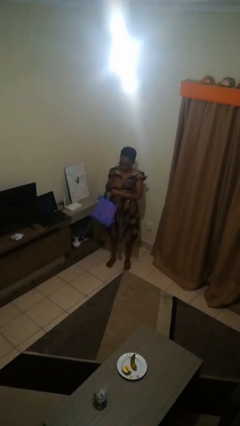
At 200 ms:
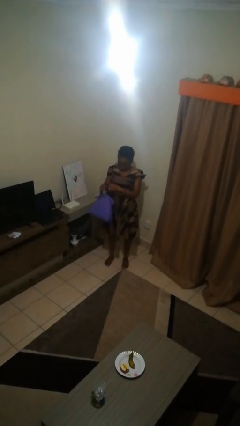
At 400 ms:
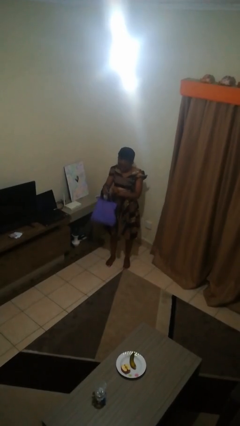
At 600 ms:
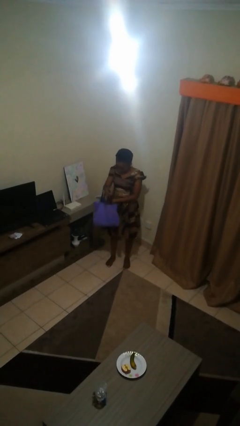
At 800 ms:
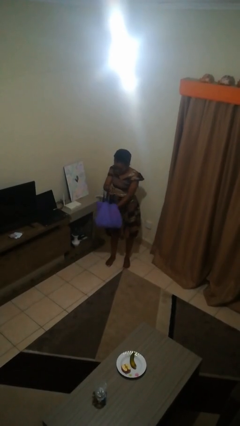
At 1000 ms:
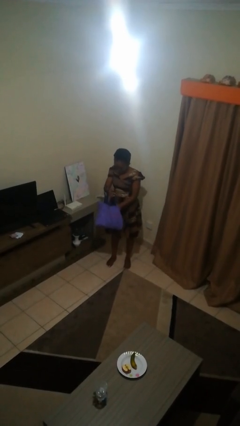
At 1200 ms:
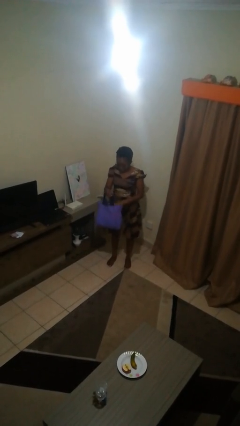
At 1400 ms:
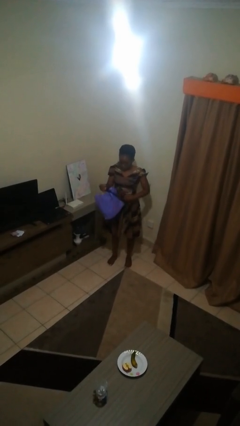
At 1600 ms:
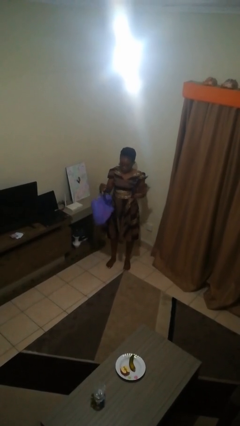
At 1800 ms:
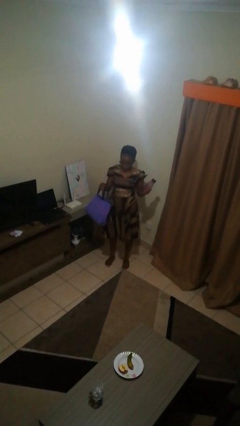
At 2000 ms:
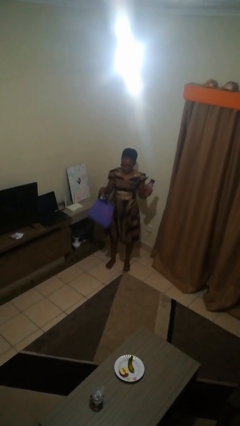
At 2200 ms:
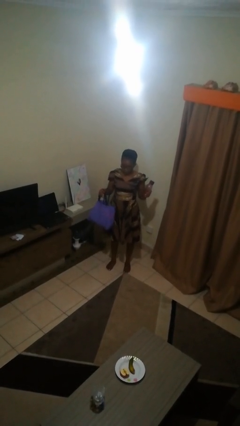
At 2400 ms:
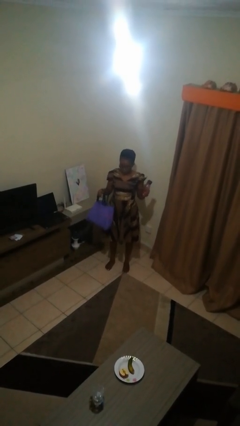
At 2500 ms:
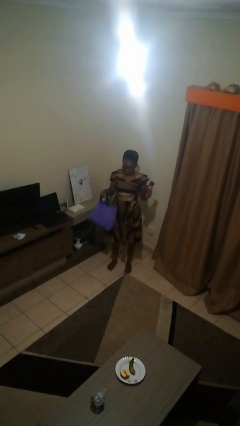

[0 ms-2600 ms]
person takes object from bag

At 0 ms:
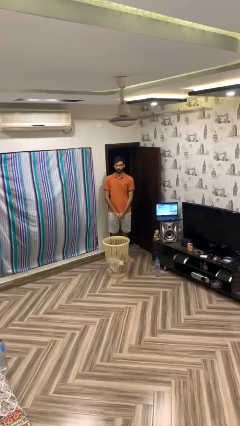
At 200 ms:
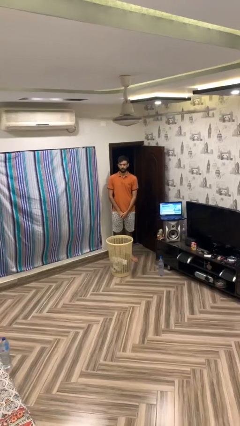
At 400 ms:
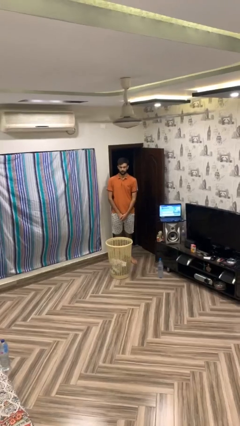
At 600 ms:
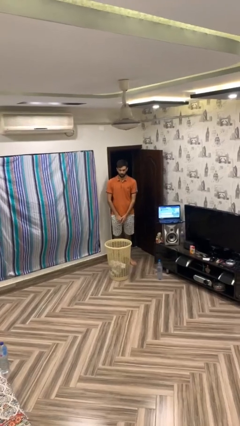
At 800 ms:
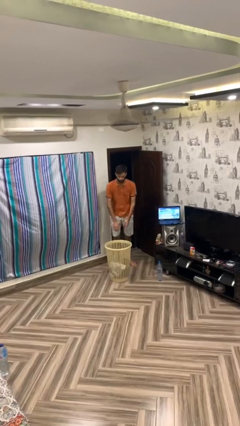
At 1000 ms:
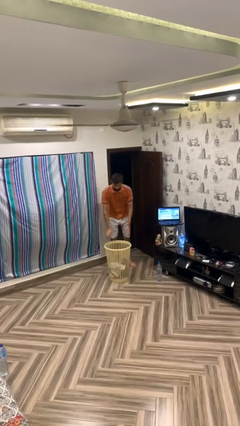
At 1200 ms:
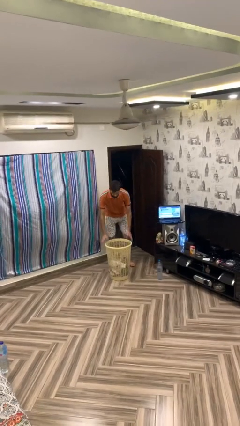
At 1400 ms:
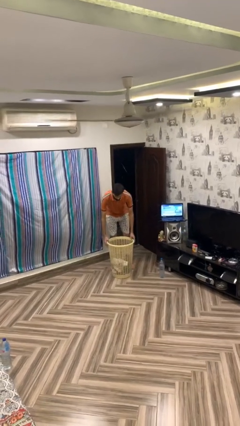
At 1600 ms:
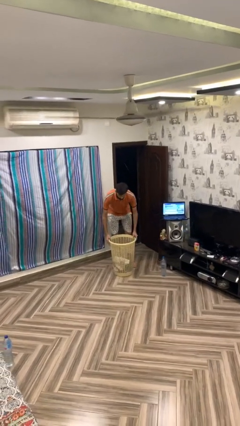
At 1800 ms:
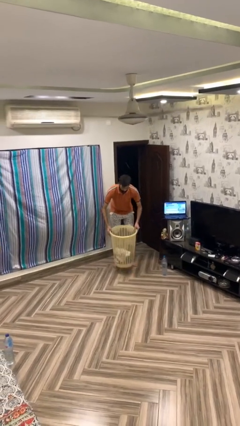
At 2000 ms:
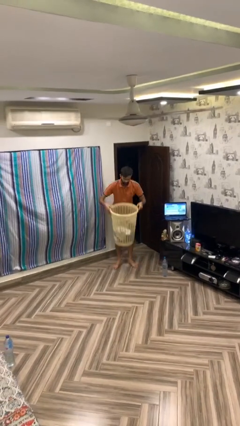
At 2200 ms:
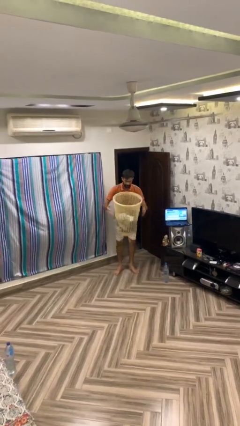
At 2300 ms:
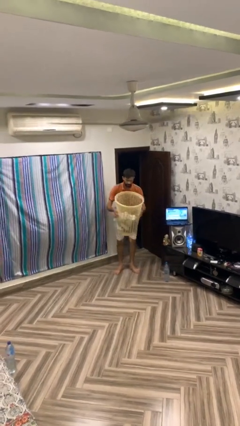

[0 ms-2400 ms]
person picks up object from floor

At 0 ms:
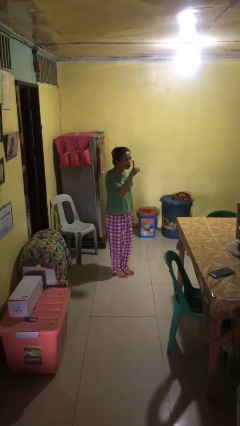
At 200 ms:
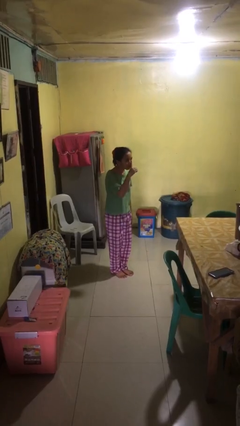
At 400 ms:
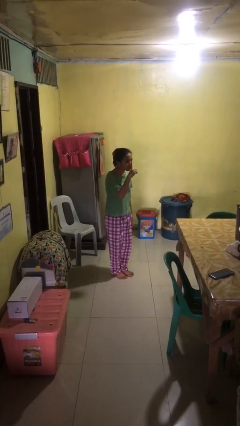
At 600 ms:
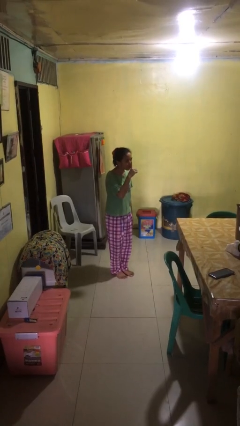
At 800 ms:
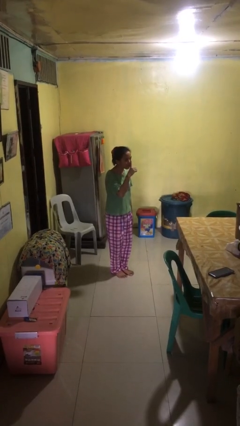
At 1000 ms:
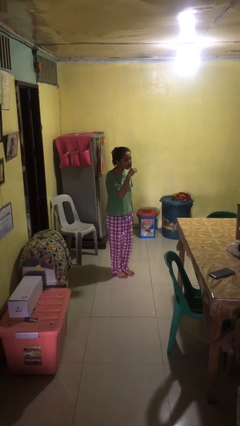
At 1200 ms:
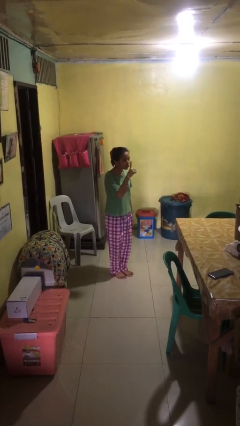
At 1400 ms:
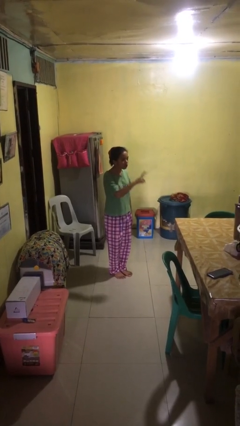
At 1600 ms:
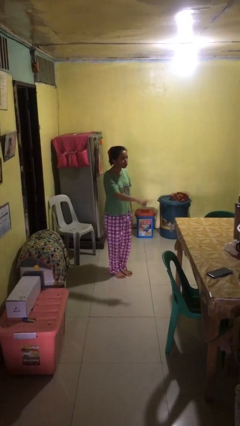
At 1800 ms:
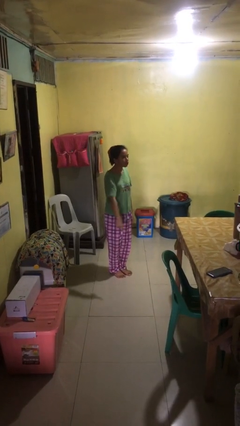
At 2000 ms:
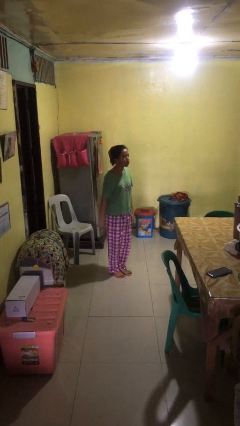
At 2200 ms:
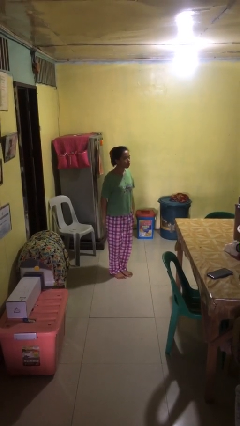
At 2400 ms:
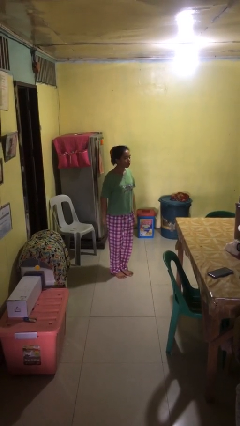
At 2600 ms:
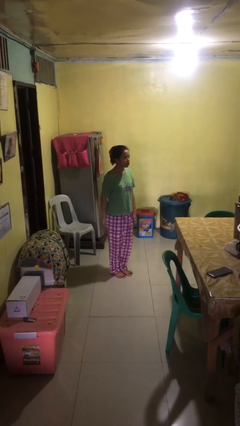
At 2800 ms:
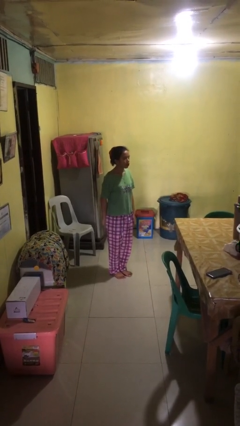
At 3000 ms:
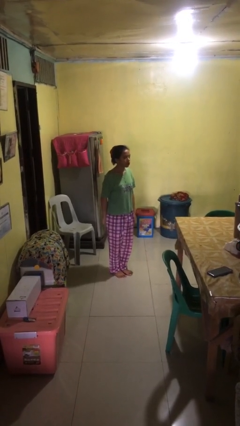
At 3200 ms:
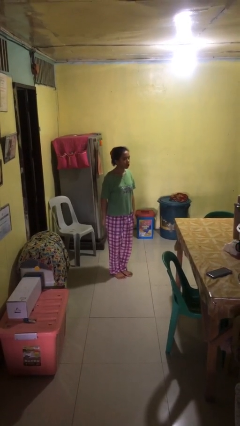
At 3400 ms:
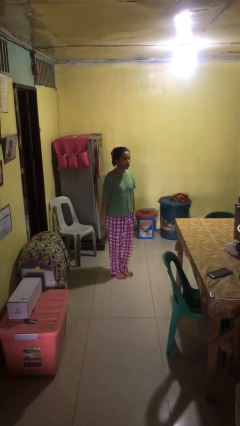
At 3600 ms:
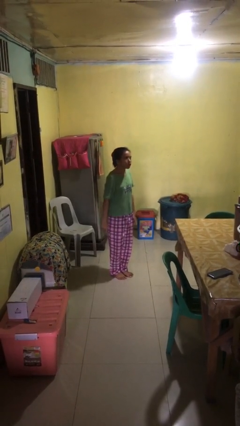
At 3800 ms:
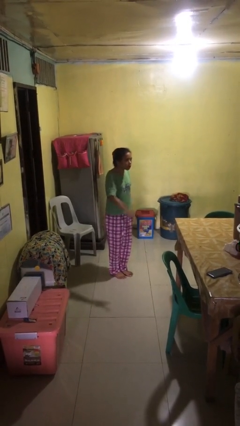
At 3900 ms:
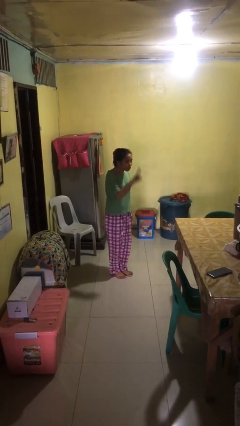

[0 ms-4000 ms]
person gestures be quiet

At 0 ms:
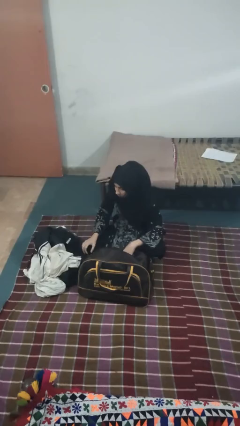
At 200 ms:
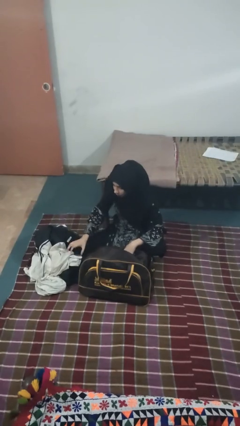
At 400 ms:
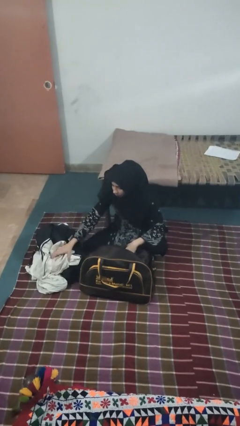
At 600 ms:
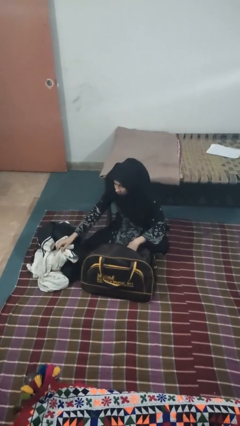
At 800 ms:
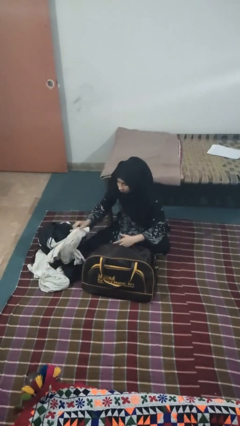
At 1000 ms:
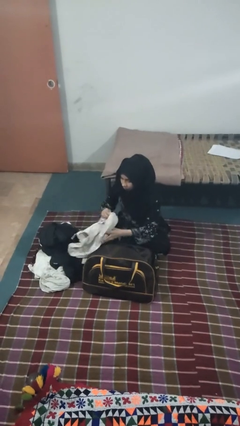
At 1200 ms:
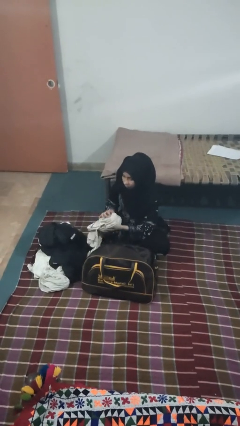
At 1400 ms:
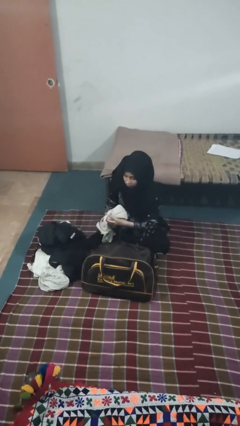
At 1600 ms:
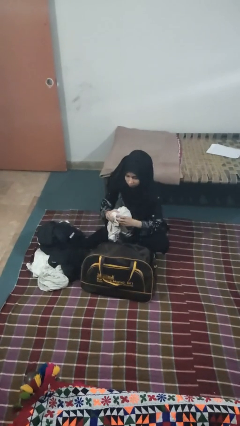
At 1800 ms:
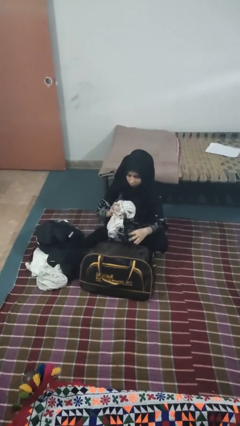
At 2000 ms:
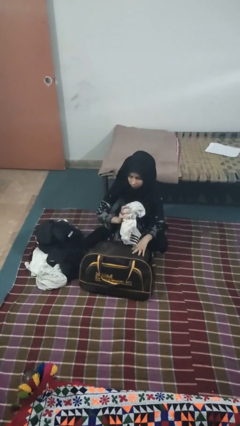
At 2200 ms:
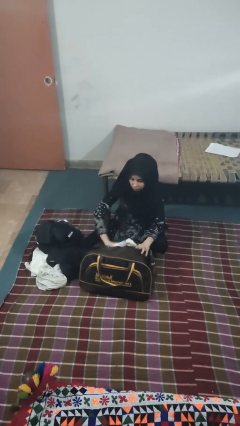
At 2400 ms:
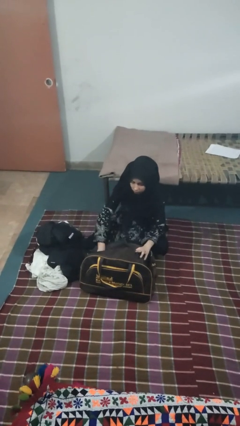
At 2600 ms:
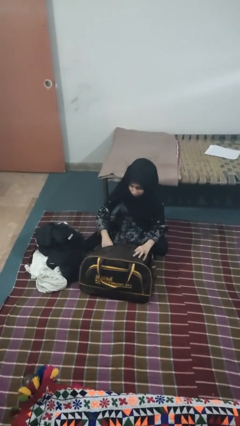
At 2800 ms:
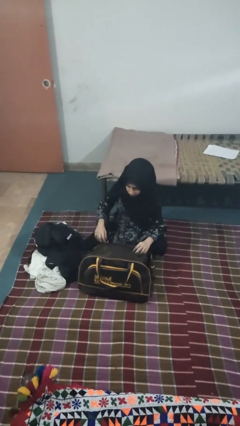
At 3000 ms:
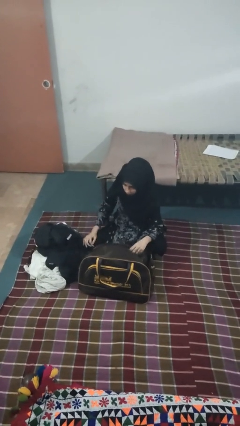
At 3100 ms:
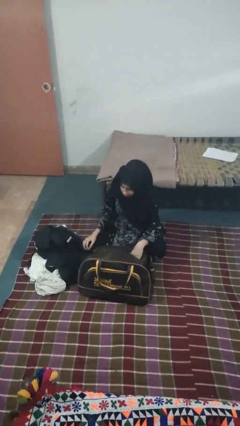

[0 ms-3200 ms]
person loads clothes into suitcase

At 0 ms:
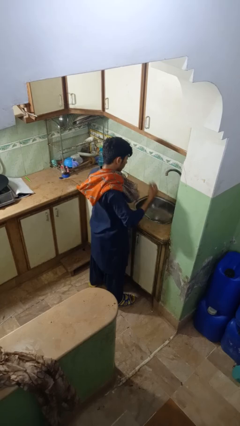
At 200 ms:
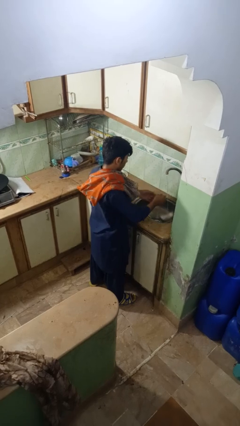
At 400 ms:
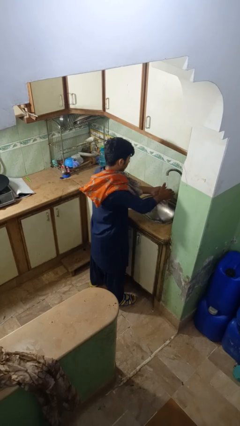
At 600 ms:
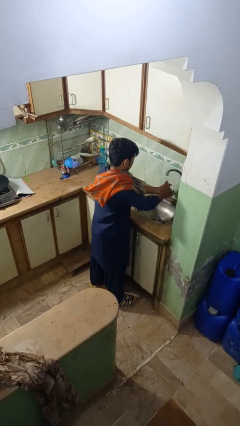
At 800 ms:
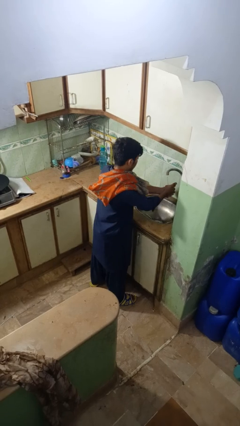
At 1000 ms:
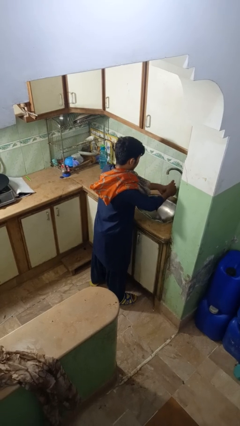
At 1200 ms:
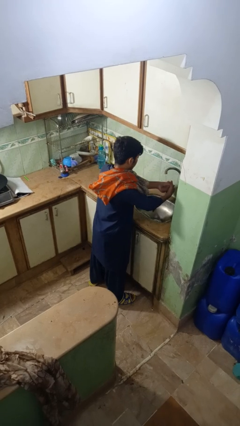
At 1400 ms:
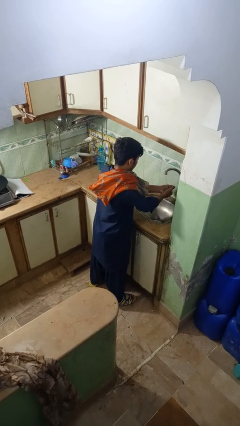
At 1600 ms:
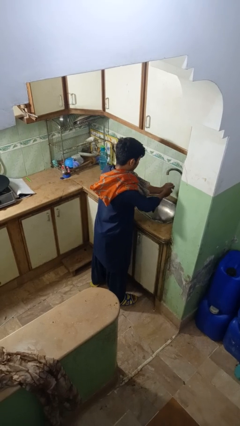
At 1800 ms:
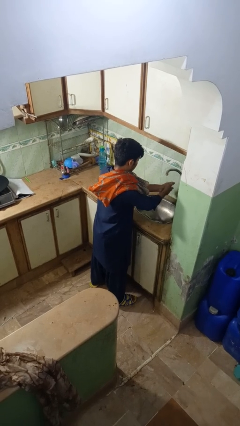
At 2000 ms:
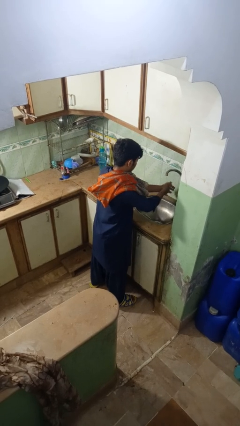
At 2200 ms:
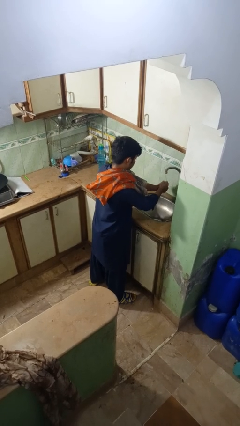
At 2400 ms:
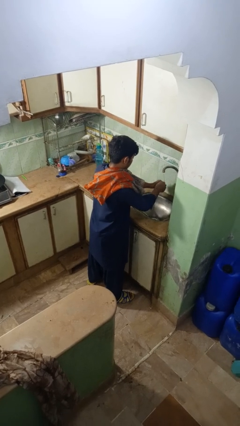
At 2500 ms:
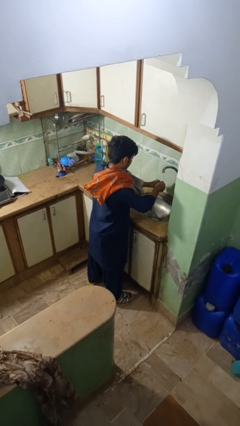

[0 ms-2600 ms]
person washes hands

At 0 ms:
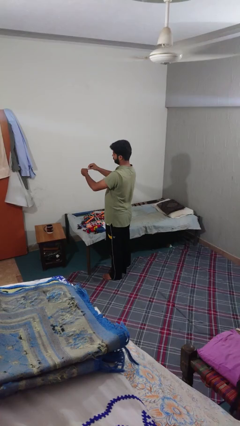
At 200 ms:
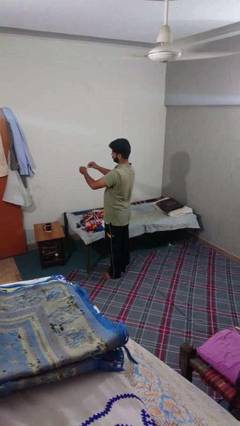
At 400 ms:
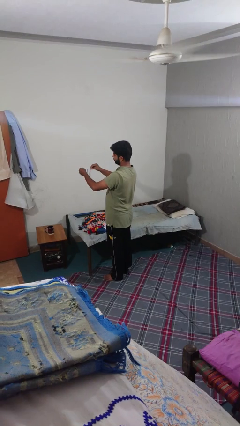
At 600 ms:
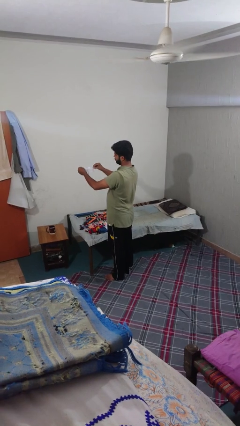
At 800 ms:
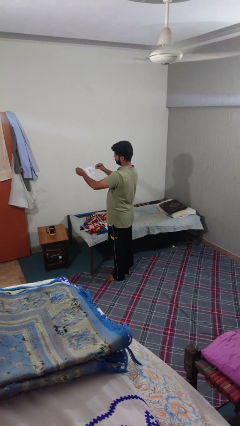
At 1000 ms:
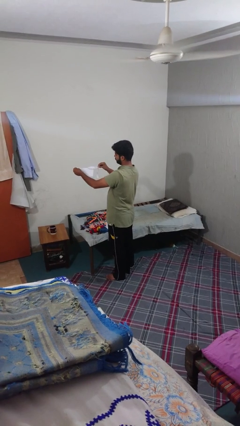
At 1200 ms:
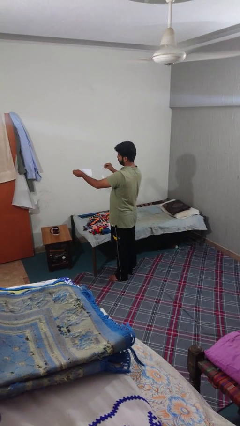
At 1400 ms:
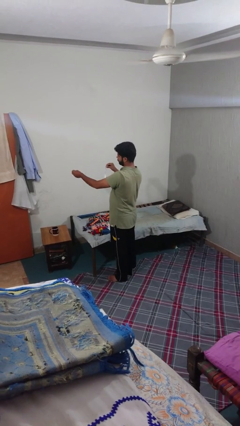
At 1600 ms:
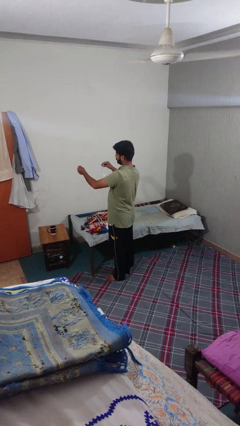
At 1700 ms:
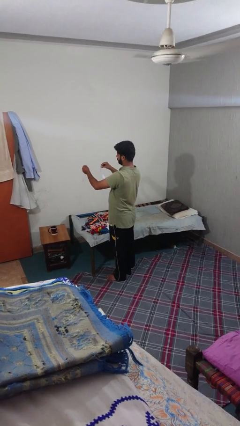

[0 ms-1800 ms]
person tears paper

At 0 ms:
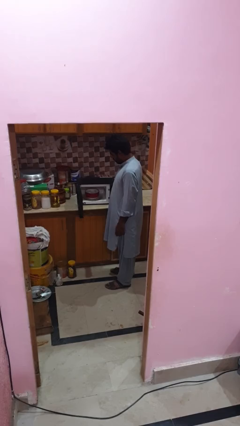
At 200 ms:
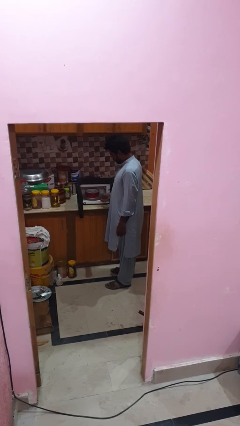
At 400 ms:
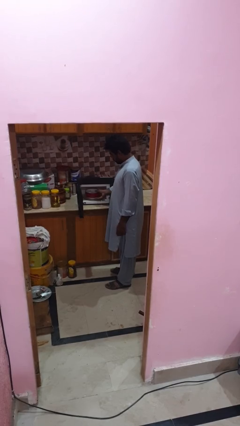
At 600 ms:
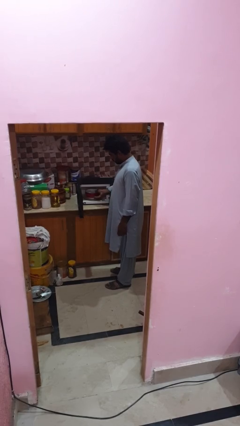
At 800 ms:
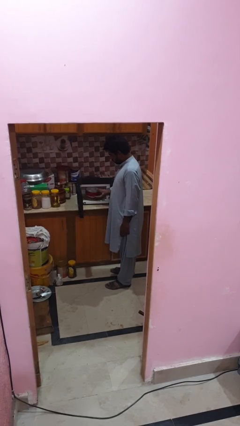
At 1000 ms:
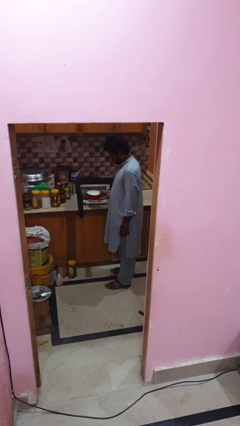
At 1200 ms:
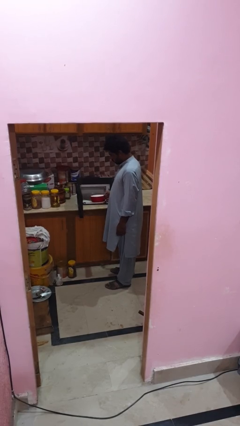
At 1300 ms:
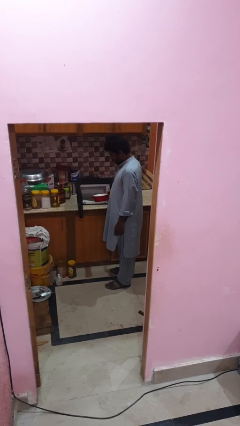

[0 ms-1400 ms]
person takes object from microwave
